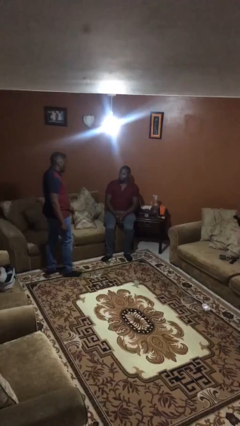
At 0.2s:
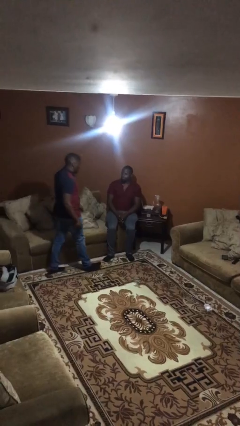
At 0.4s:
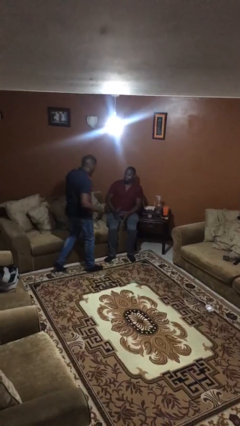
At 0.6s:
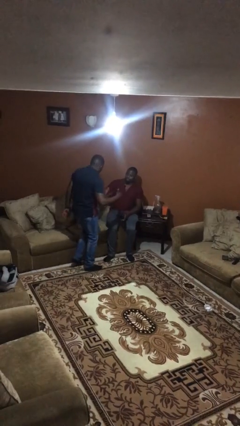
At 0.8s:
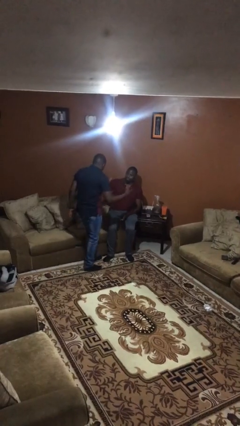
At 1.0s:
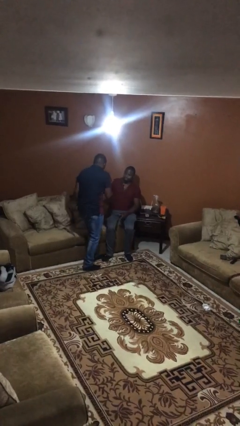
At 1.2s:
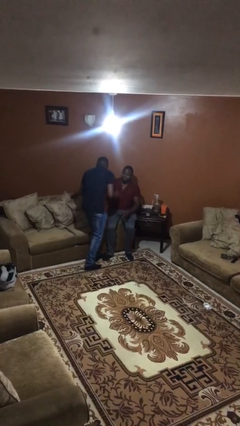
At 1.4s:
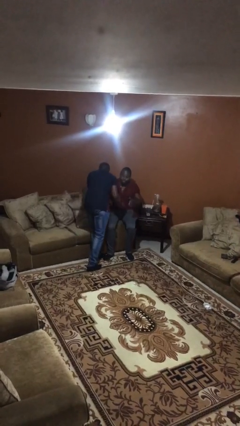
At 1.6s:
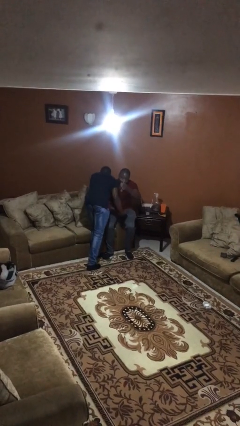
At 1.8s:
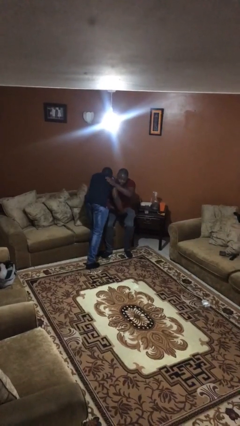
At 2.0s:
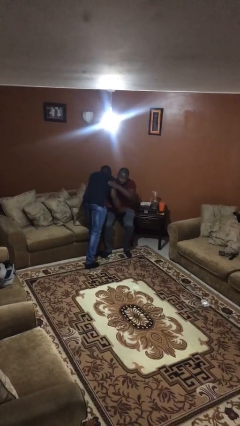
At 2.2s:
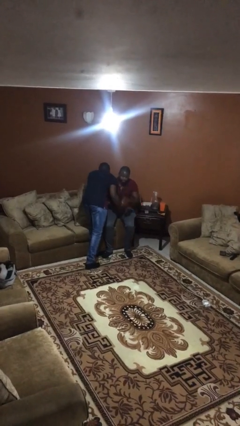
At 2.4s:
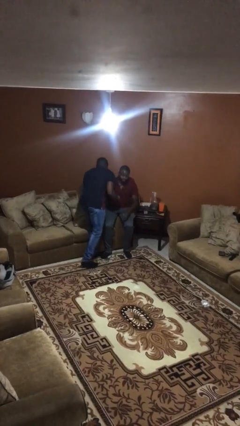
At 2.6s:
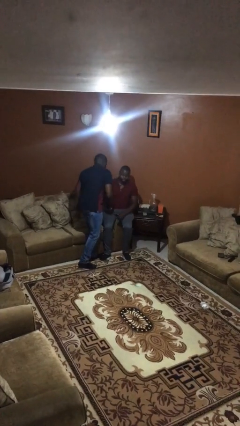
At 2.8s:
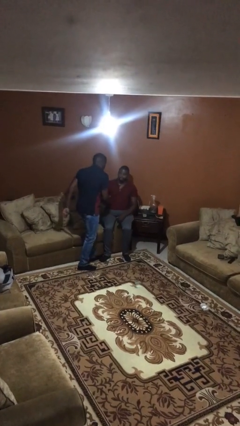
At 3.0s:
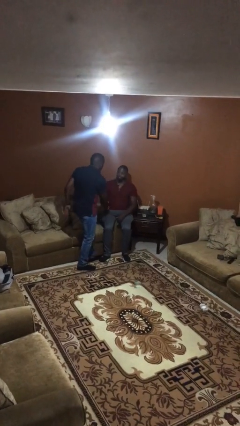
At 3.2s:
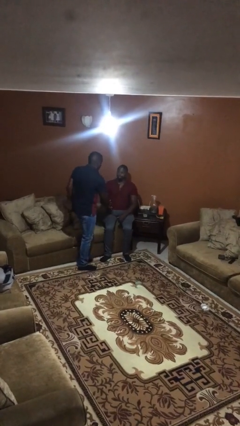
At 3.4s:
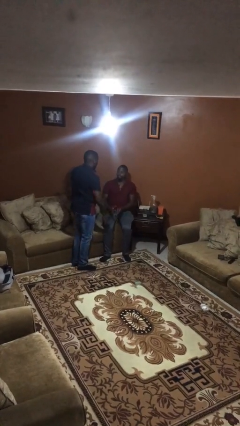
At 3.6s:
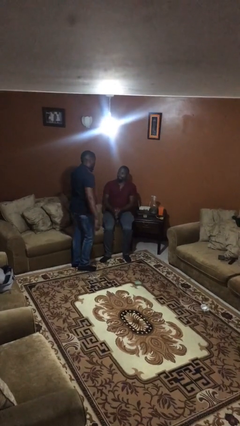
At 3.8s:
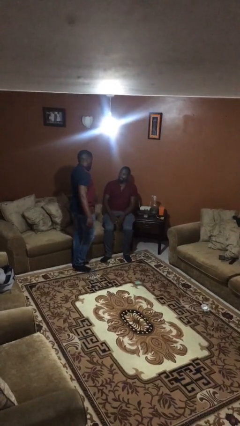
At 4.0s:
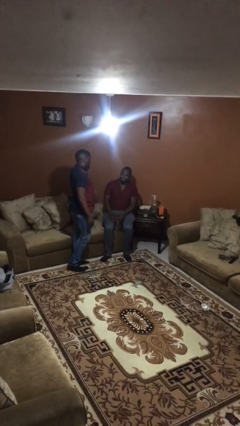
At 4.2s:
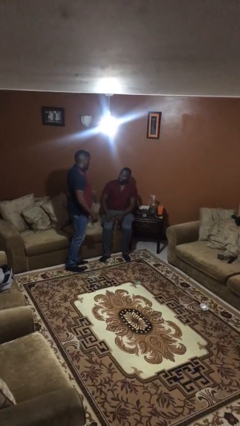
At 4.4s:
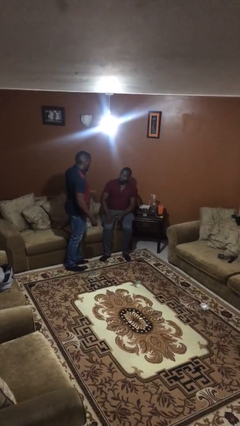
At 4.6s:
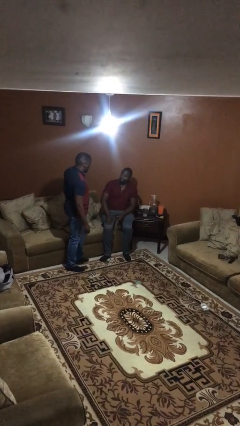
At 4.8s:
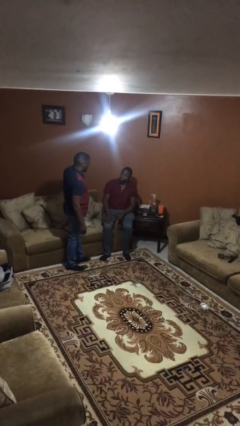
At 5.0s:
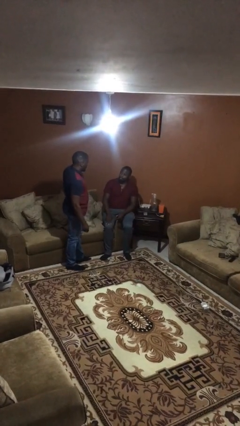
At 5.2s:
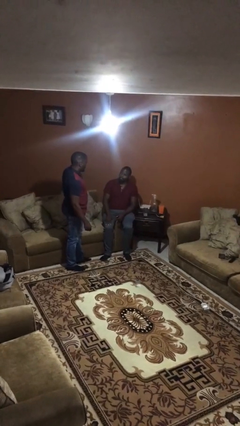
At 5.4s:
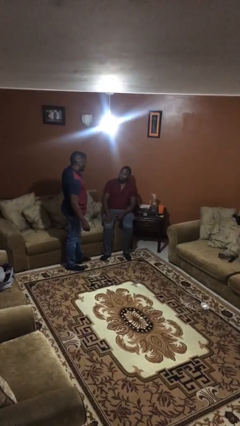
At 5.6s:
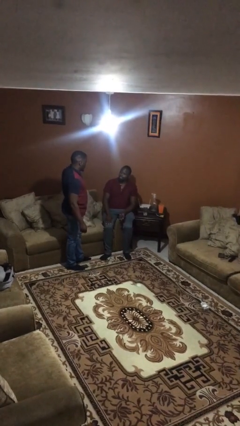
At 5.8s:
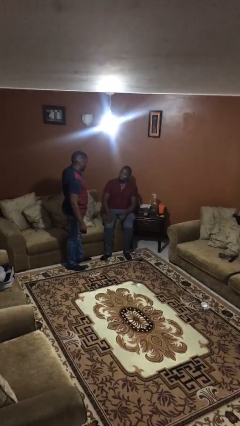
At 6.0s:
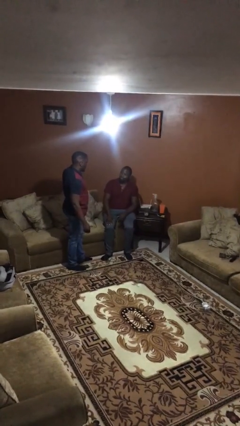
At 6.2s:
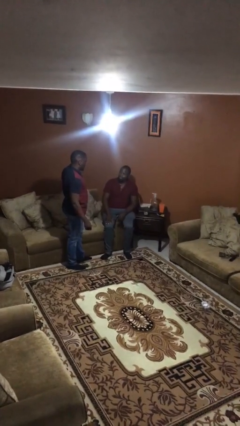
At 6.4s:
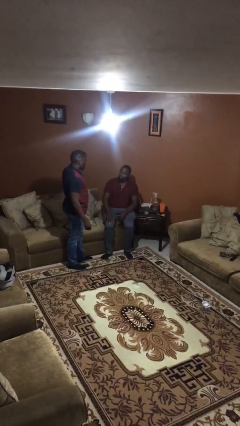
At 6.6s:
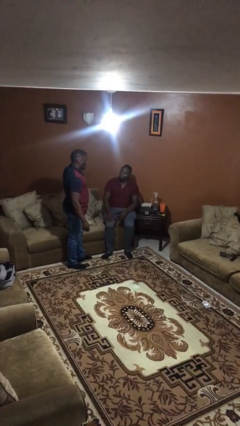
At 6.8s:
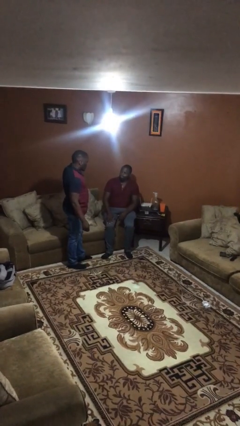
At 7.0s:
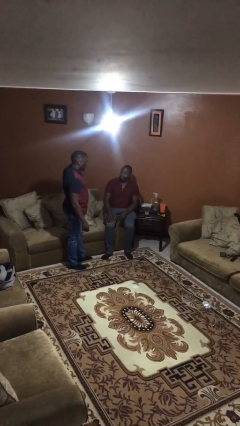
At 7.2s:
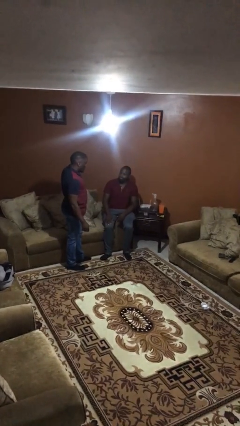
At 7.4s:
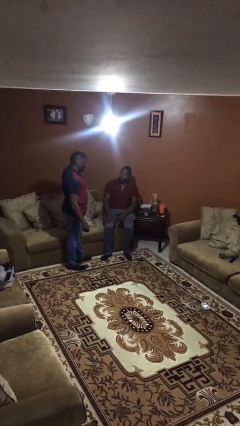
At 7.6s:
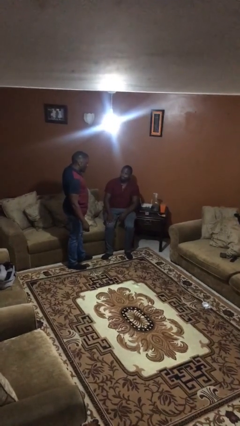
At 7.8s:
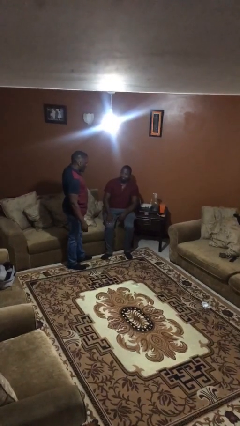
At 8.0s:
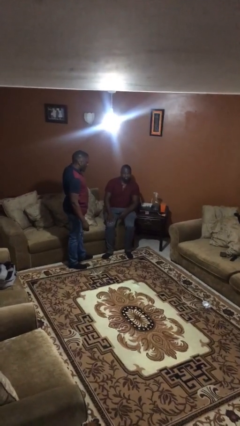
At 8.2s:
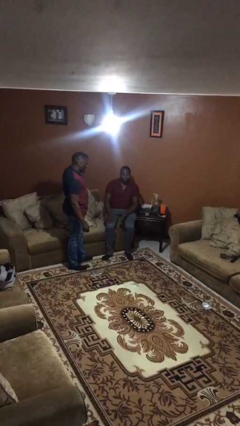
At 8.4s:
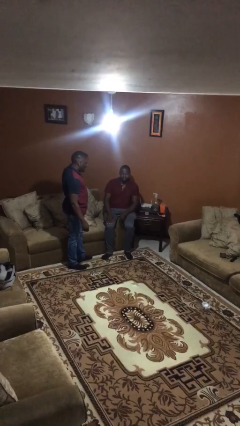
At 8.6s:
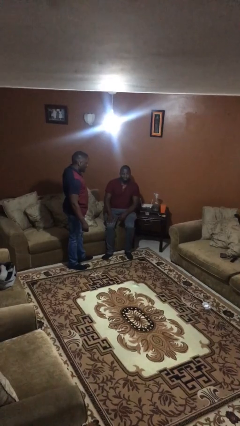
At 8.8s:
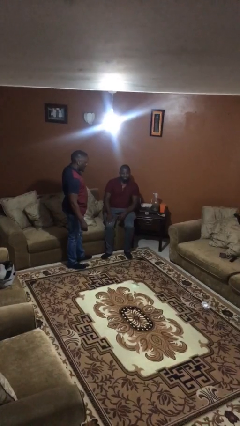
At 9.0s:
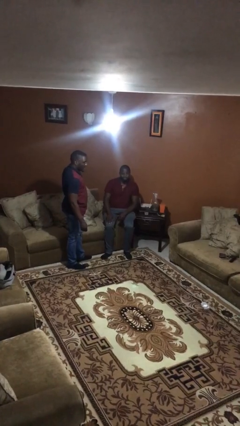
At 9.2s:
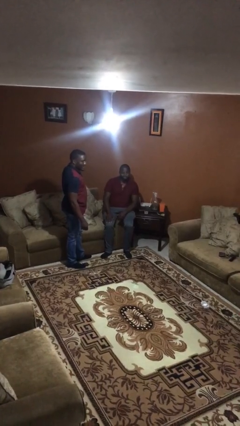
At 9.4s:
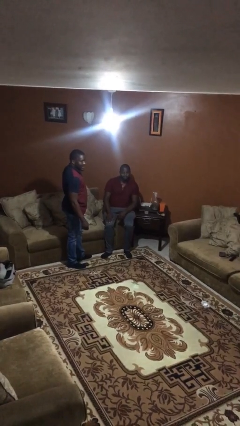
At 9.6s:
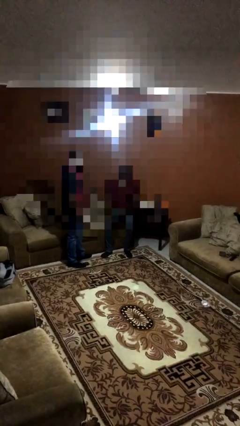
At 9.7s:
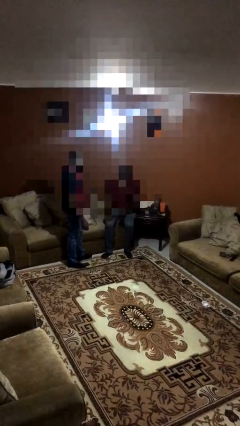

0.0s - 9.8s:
person embraces person

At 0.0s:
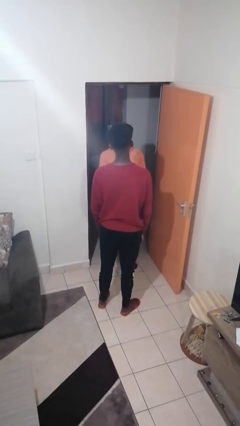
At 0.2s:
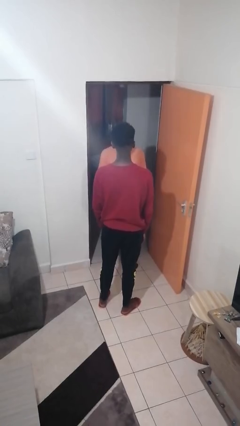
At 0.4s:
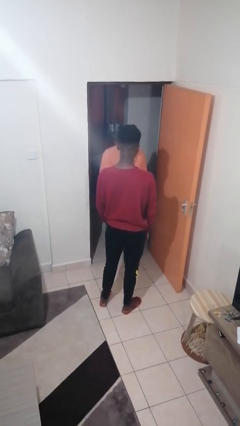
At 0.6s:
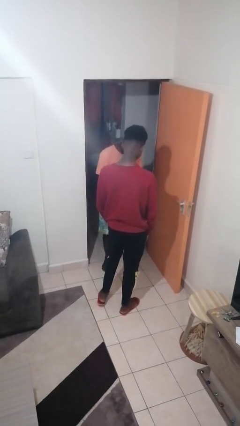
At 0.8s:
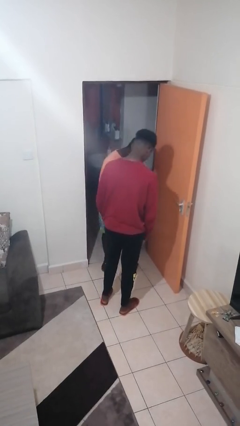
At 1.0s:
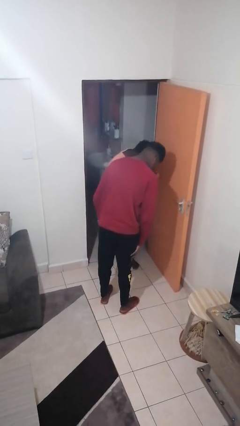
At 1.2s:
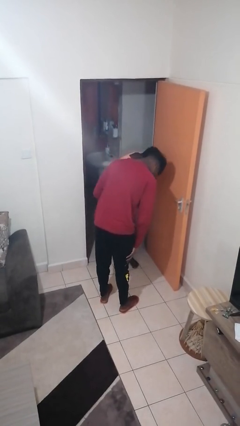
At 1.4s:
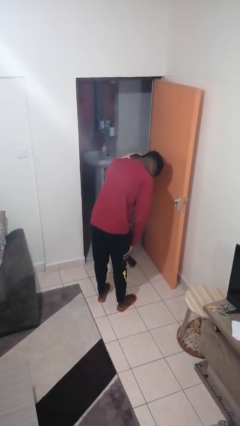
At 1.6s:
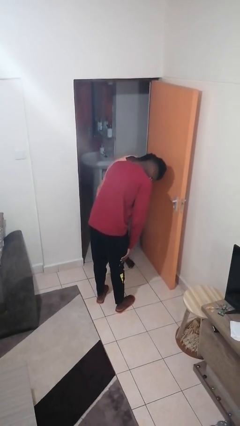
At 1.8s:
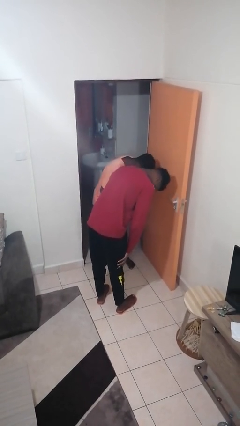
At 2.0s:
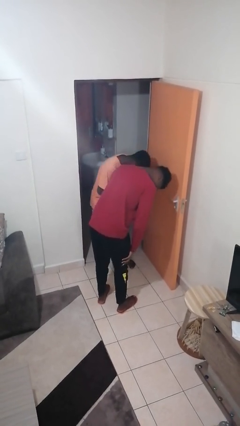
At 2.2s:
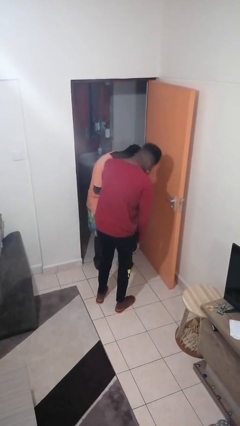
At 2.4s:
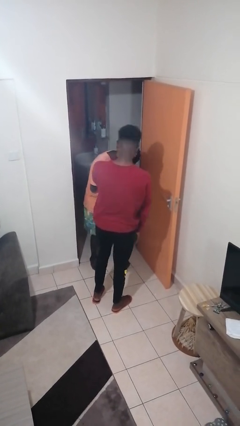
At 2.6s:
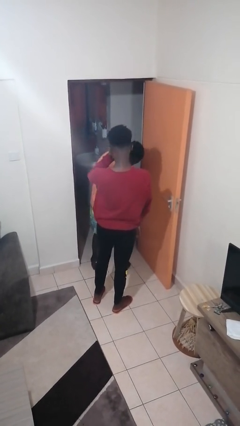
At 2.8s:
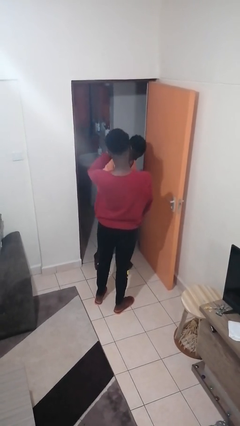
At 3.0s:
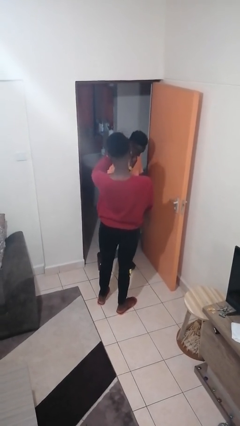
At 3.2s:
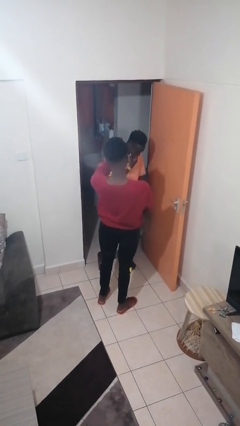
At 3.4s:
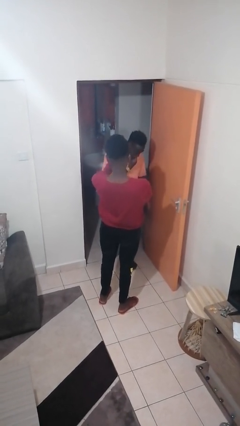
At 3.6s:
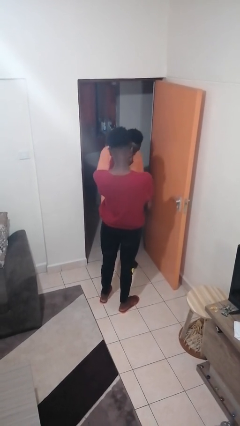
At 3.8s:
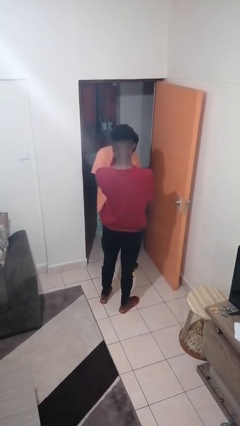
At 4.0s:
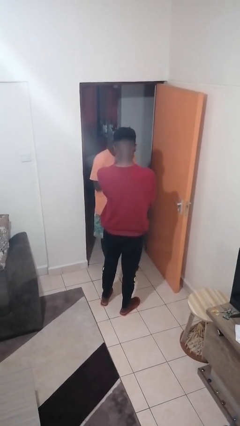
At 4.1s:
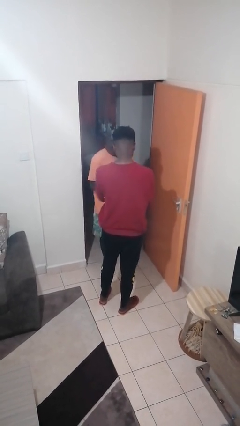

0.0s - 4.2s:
person laughs with person

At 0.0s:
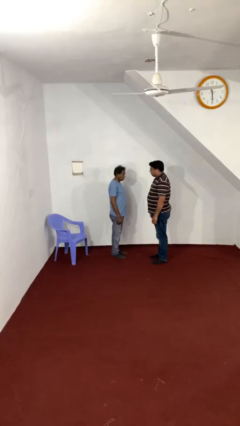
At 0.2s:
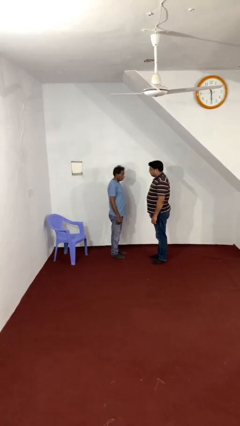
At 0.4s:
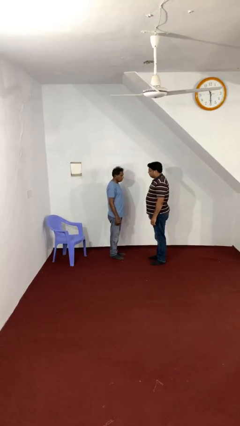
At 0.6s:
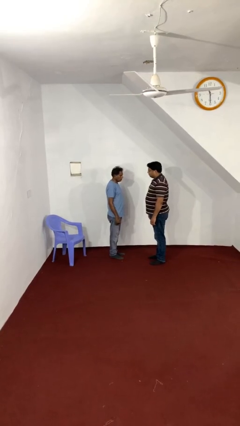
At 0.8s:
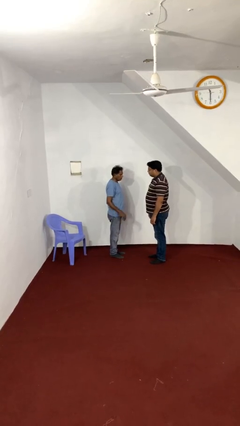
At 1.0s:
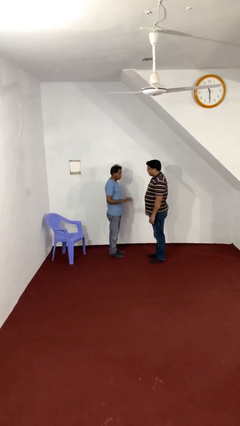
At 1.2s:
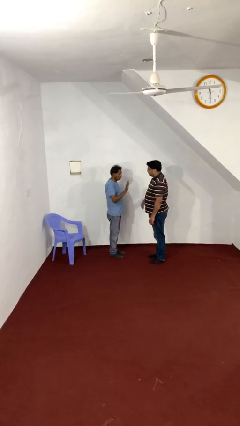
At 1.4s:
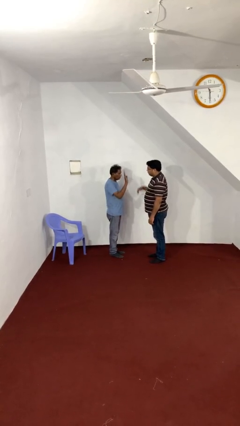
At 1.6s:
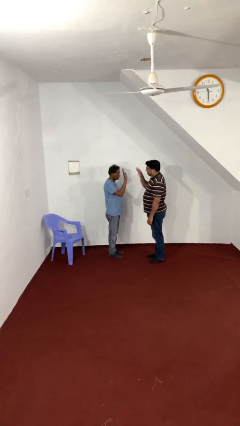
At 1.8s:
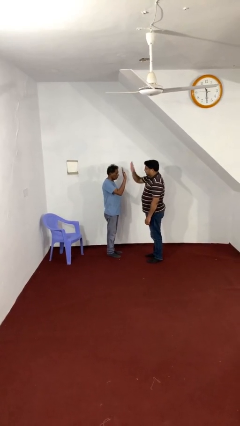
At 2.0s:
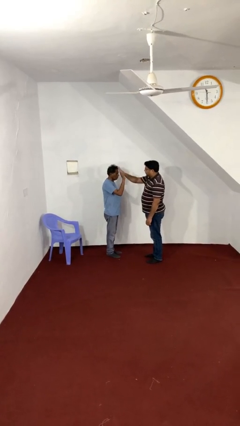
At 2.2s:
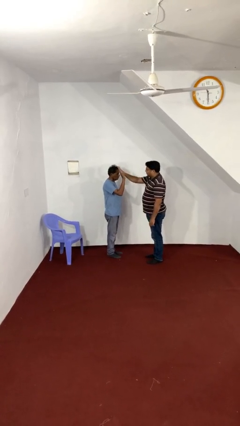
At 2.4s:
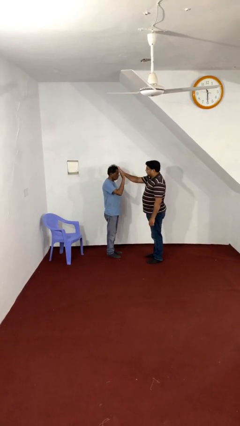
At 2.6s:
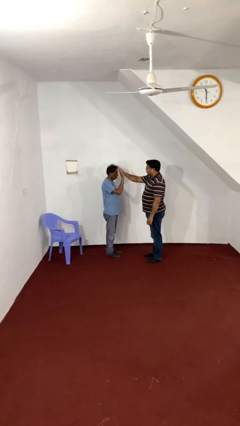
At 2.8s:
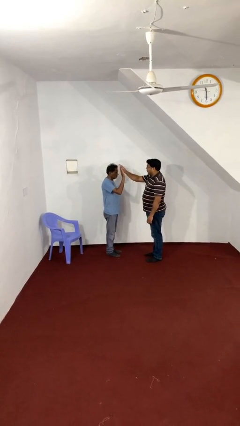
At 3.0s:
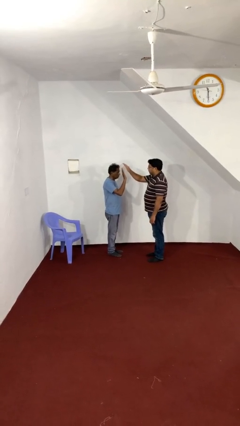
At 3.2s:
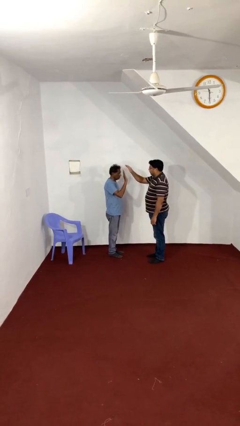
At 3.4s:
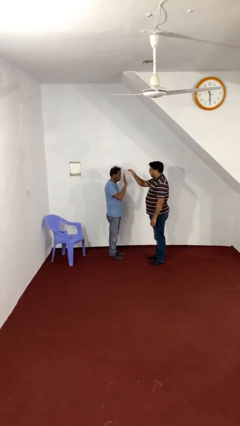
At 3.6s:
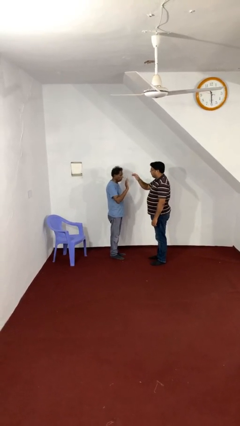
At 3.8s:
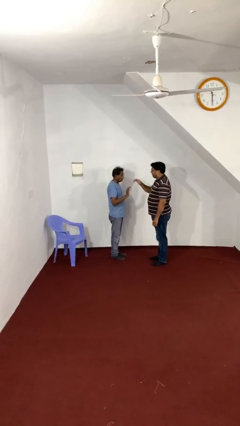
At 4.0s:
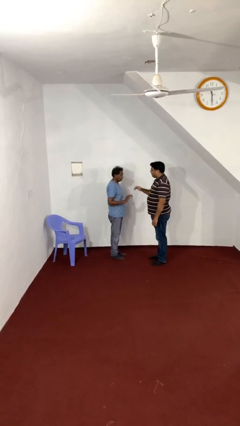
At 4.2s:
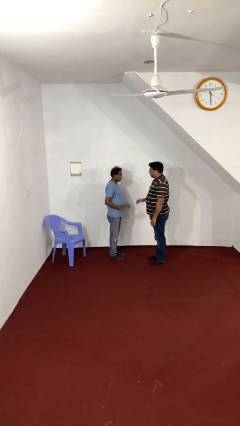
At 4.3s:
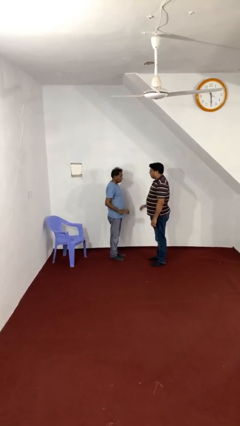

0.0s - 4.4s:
person highfives hand
